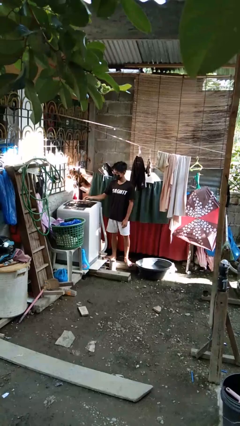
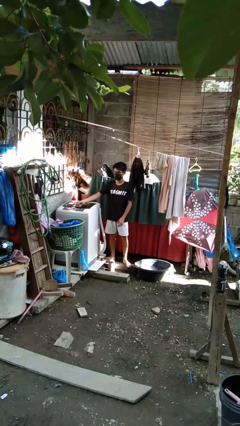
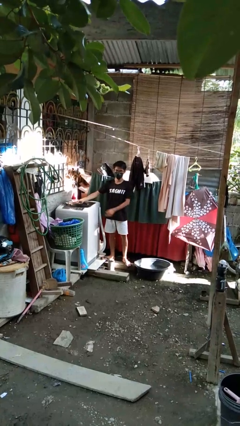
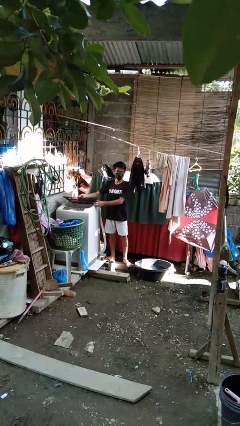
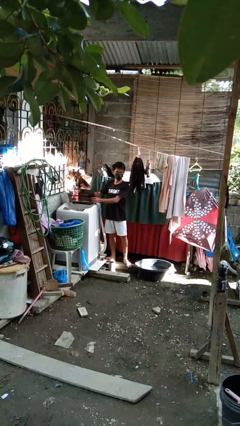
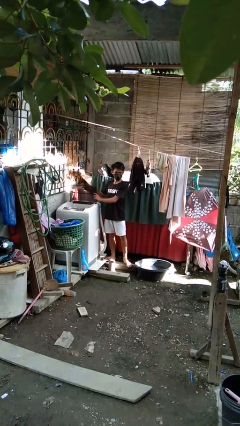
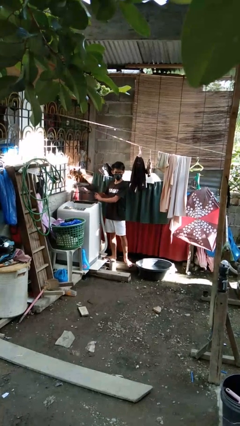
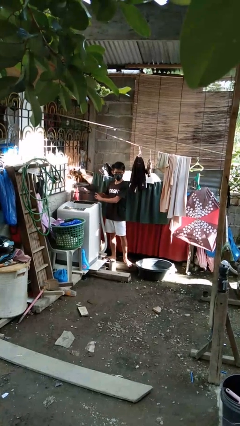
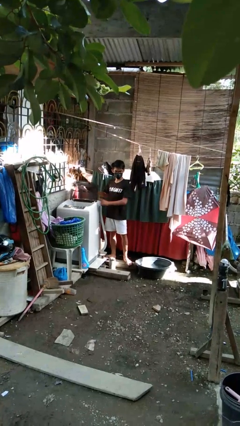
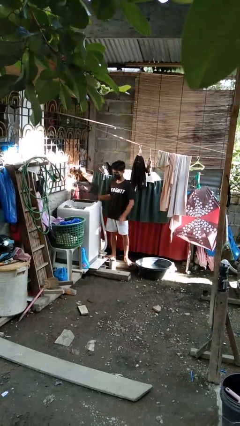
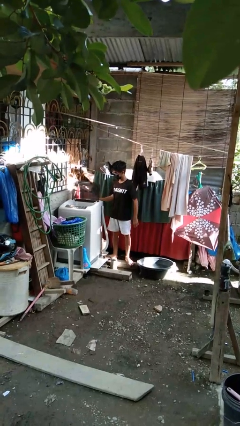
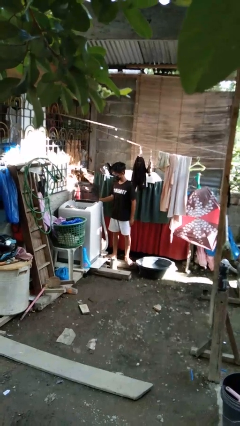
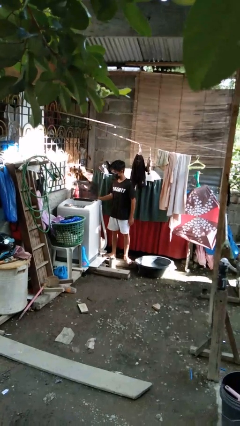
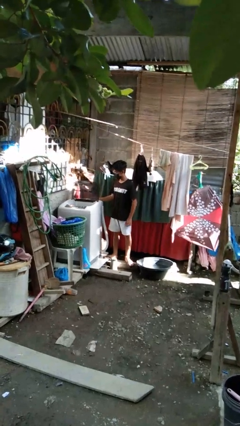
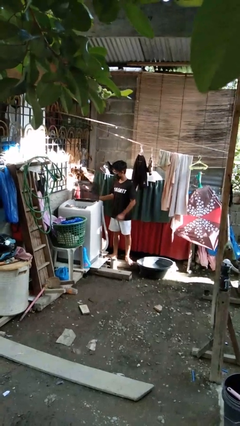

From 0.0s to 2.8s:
person opens clothes washer

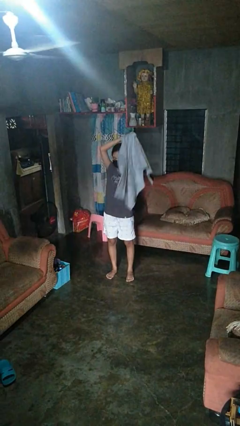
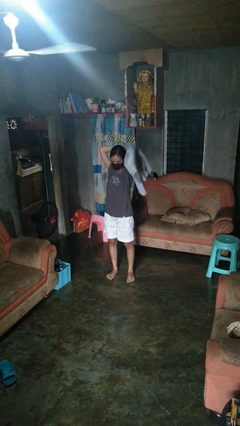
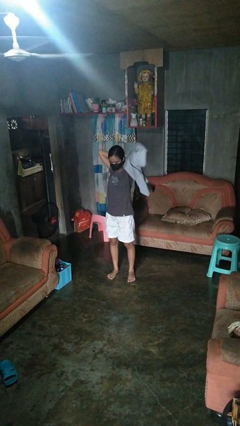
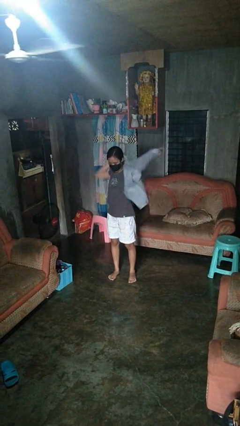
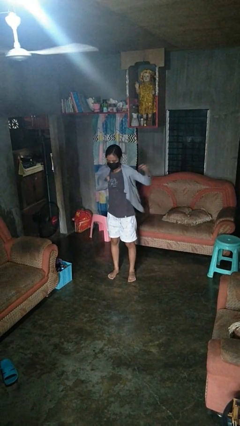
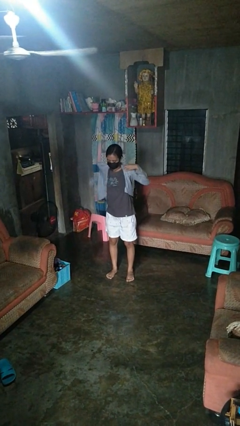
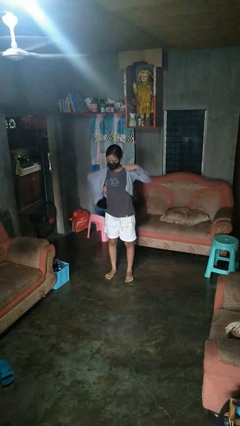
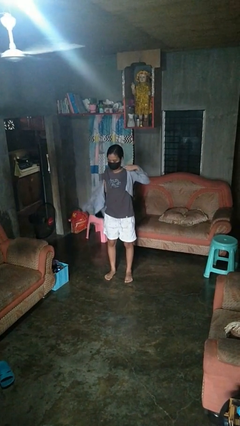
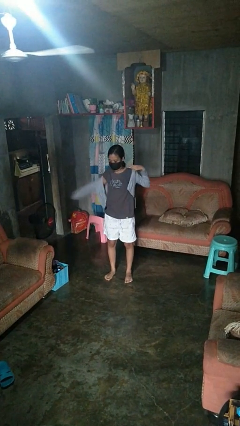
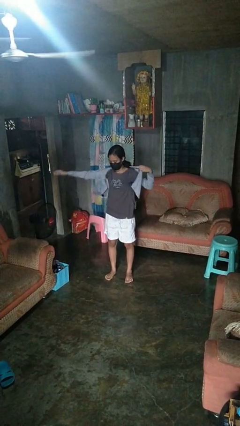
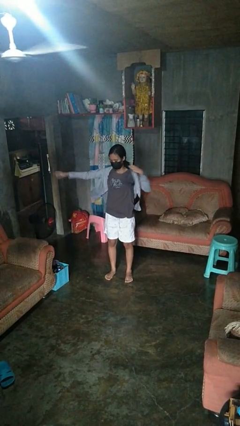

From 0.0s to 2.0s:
person puts on jacket

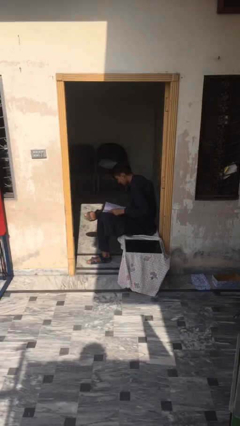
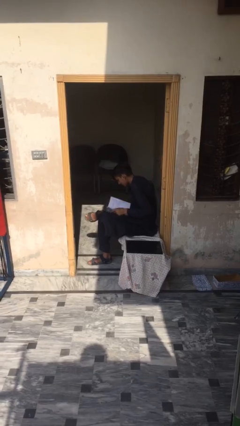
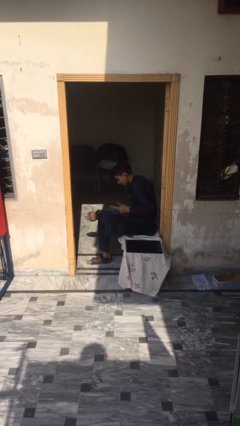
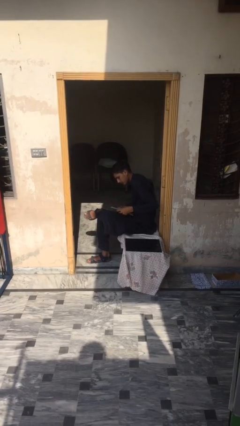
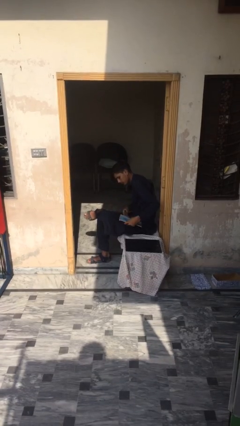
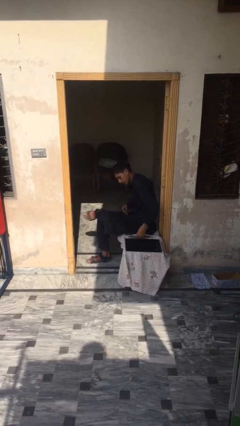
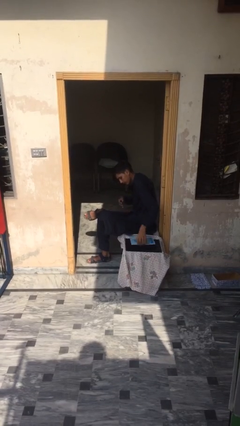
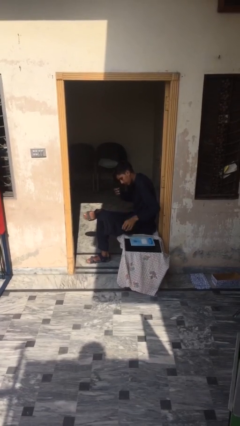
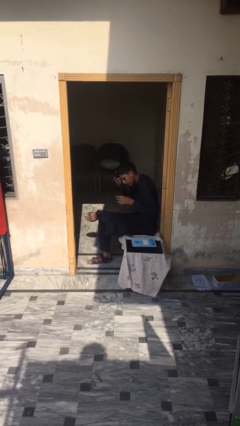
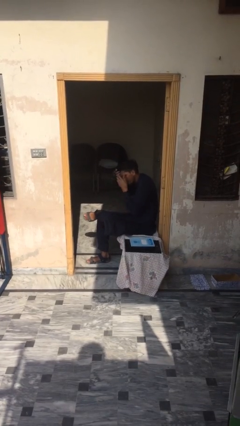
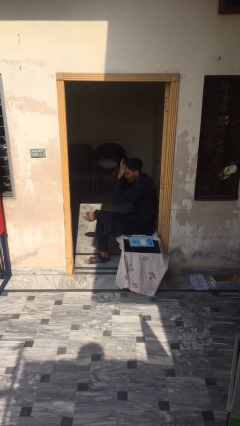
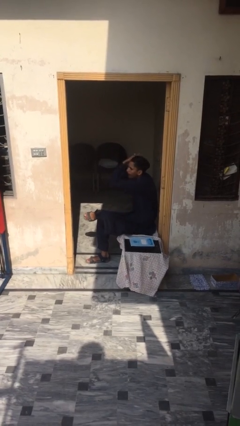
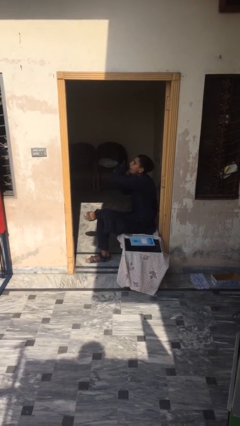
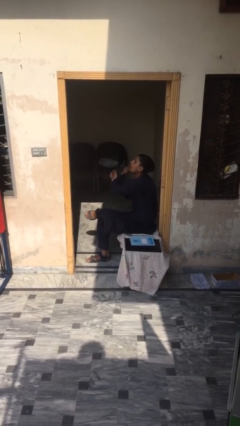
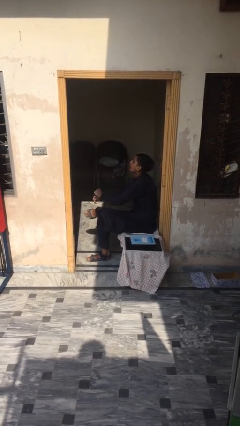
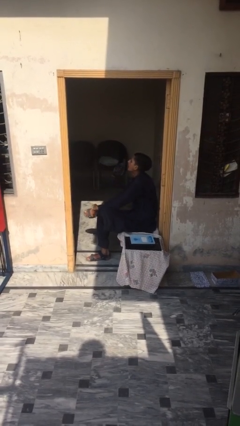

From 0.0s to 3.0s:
person puts down object on table

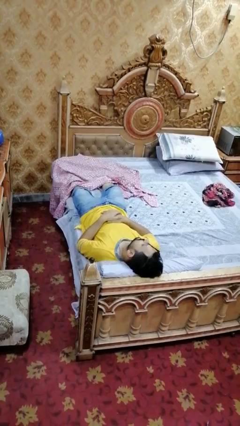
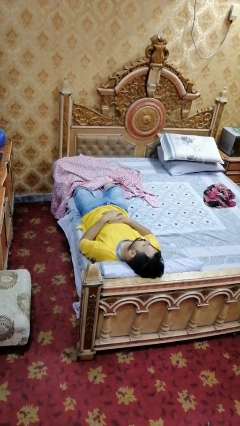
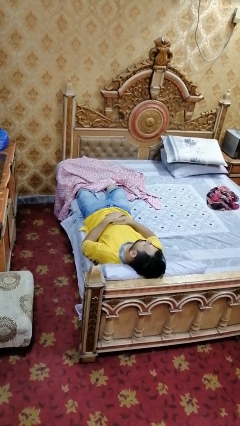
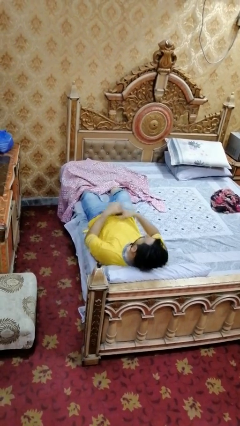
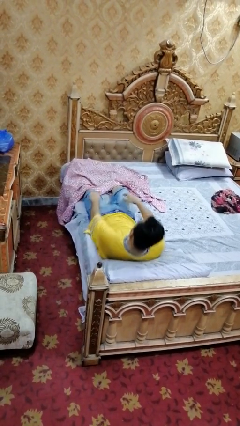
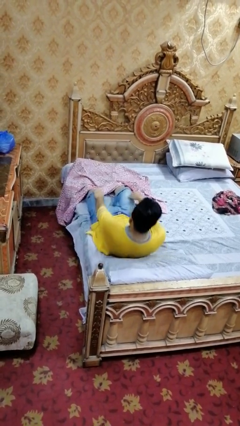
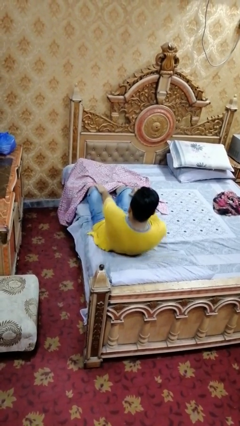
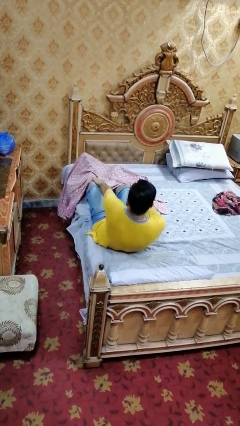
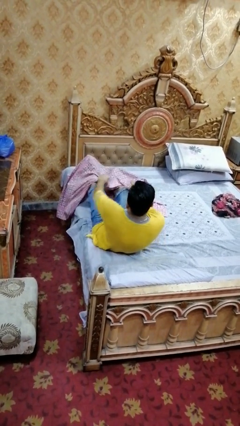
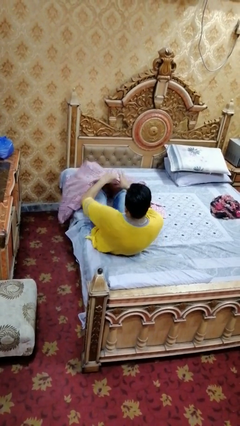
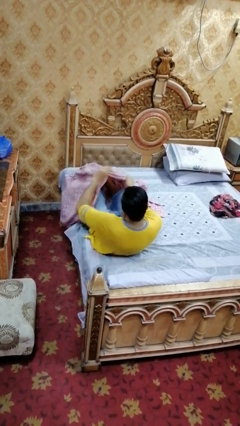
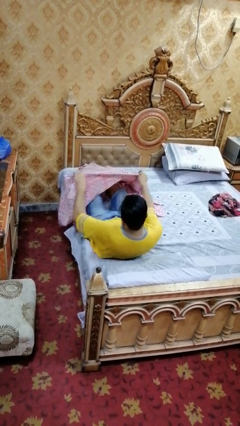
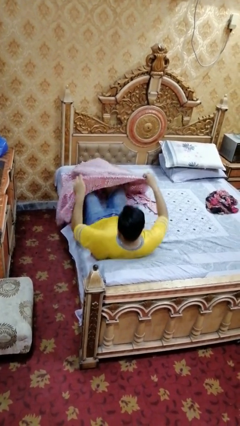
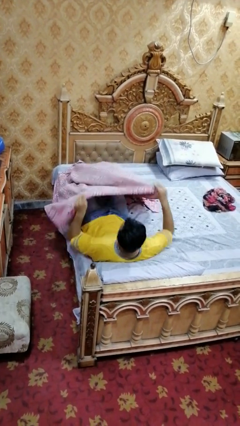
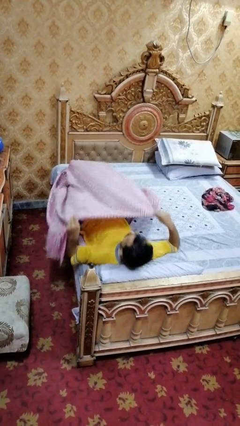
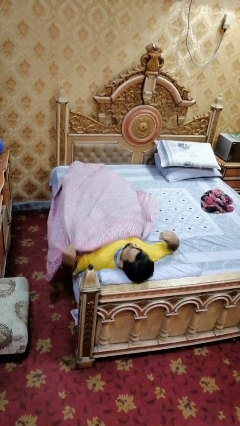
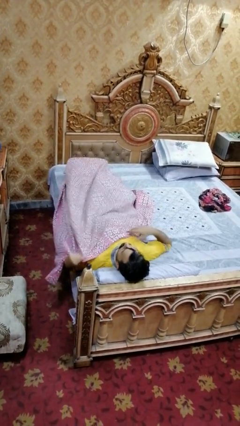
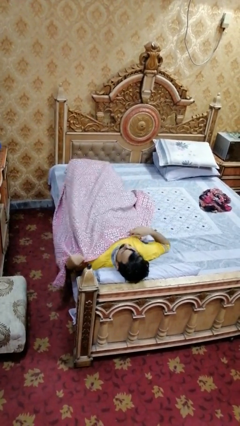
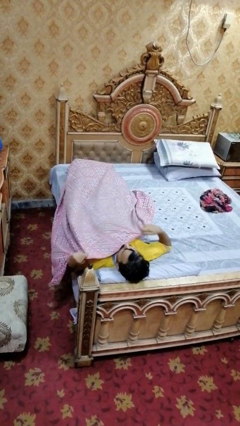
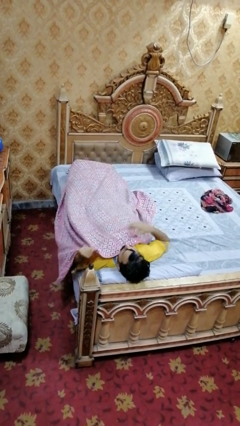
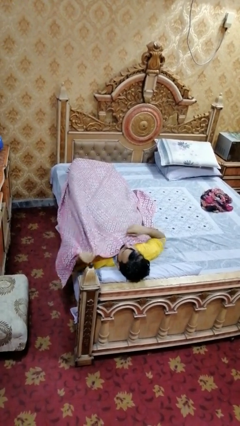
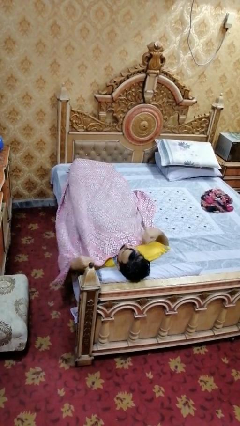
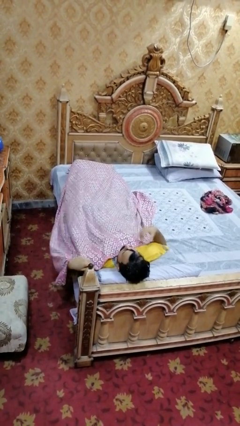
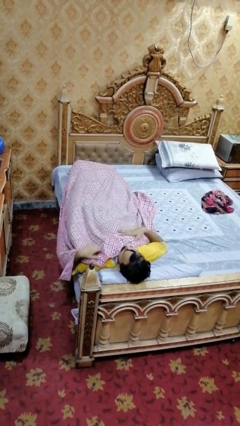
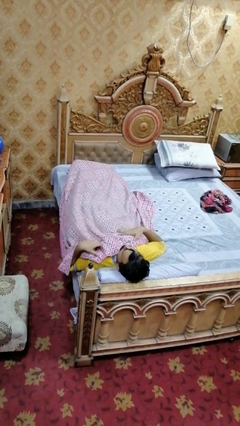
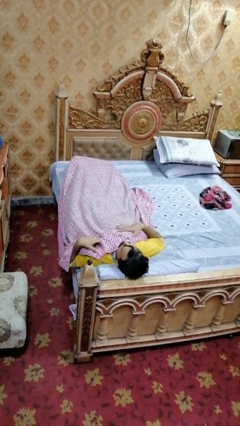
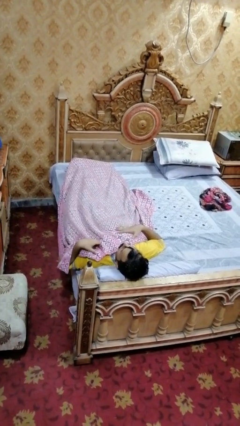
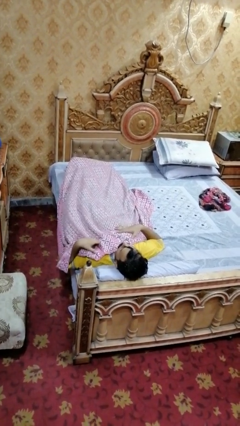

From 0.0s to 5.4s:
person covers with bedsheets

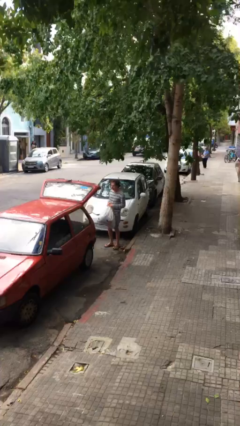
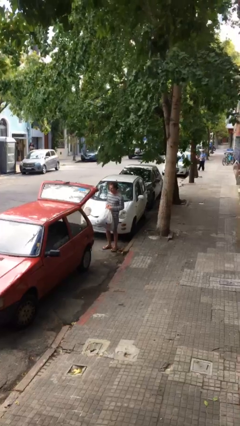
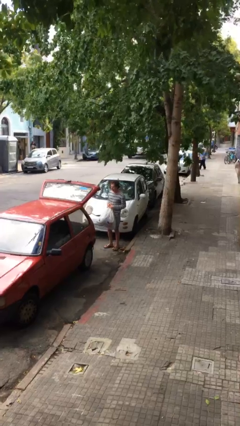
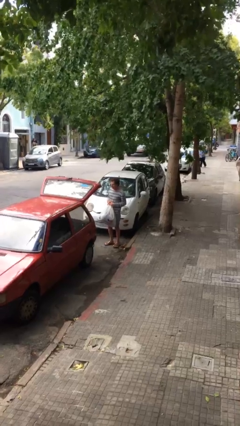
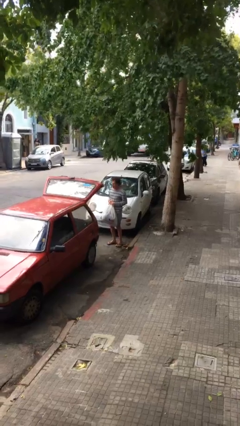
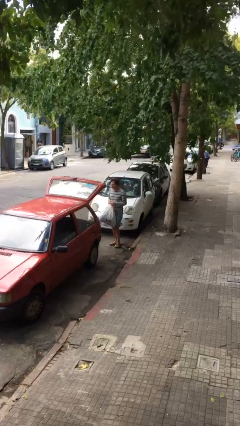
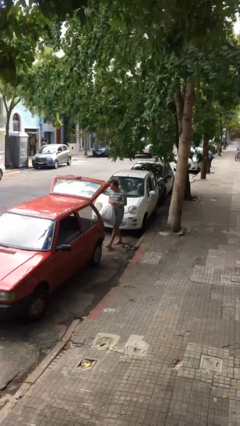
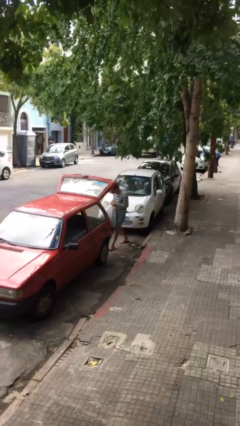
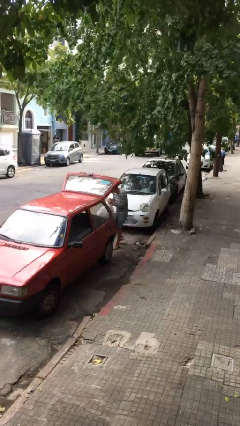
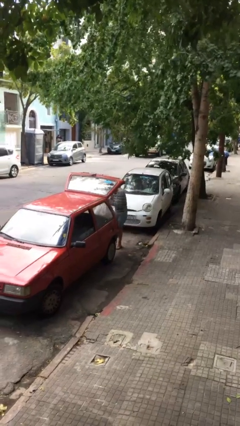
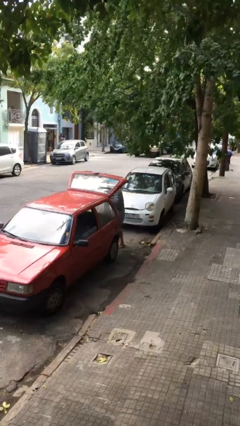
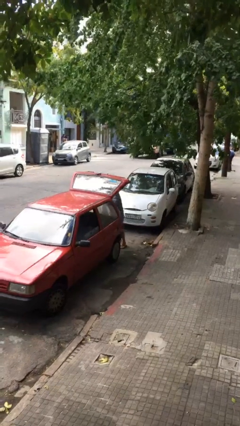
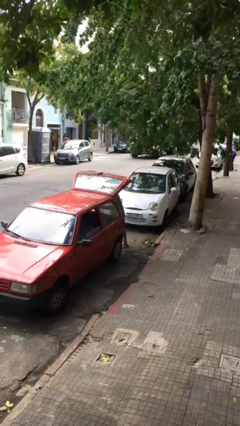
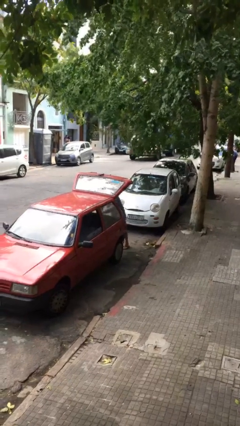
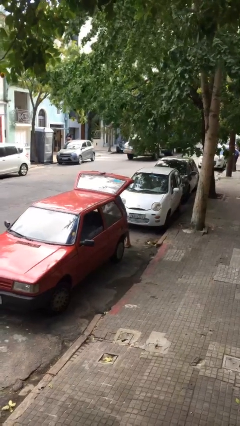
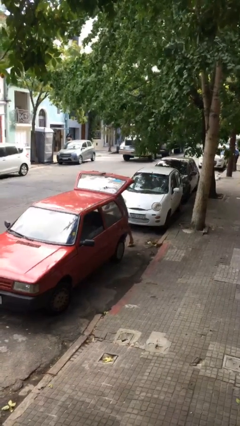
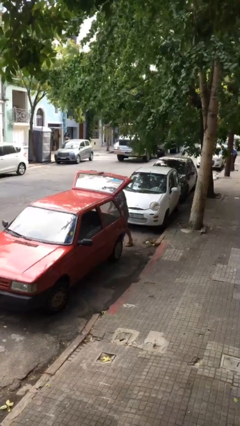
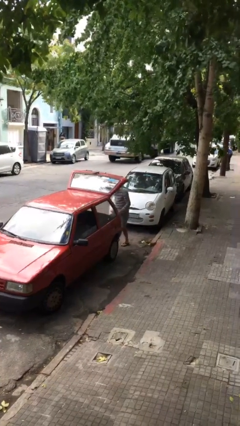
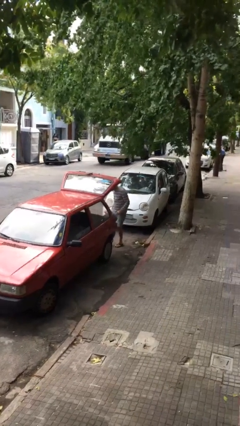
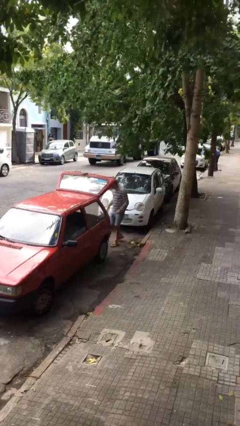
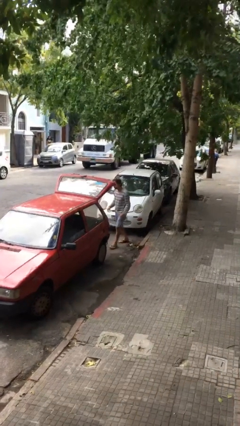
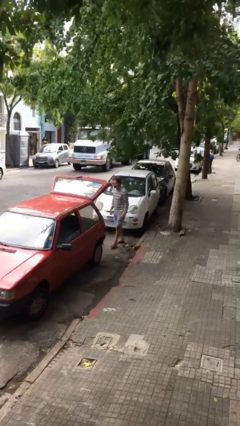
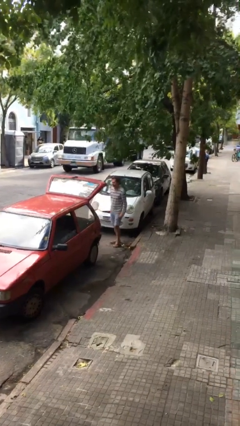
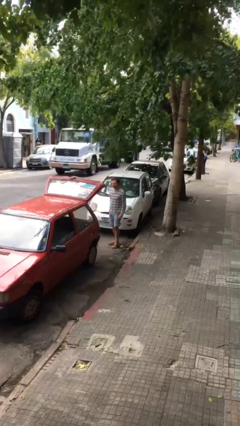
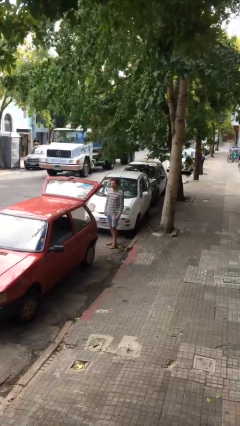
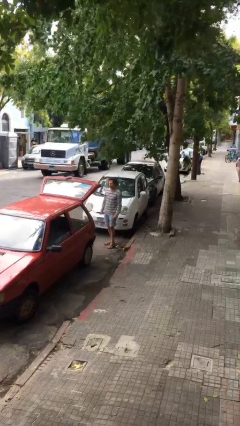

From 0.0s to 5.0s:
person loads car
